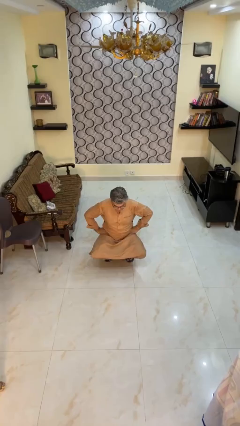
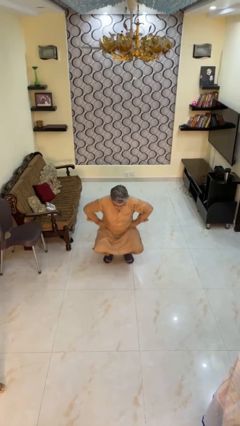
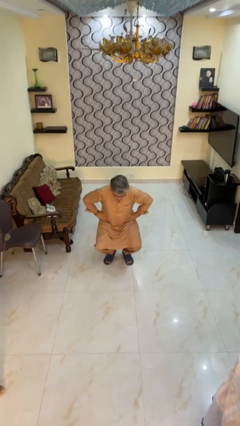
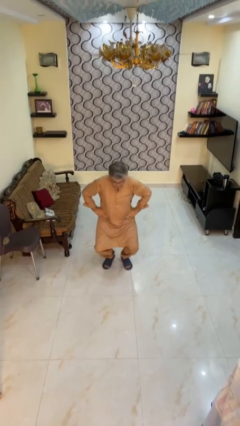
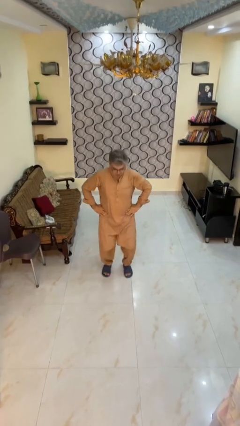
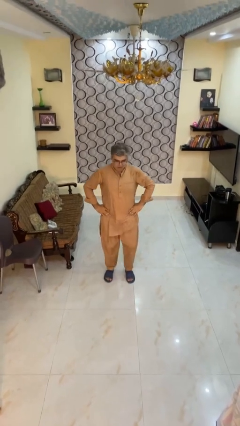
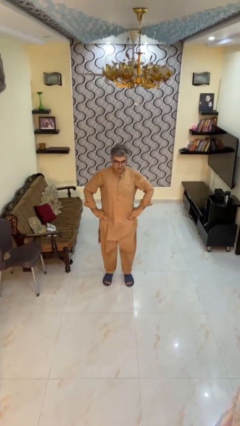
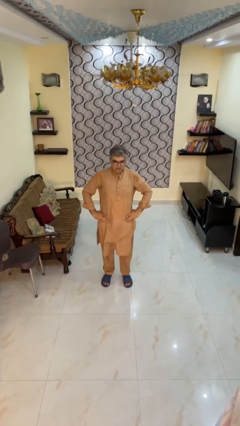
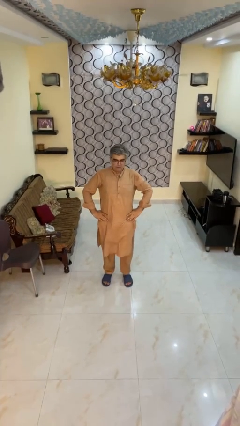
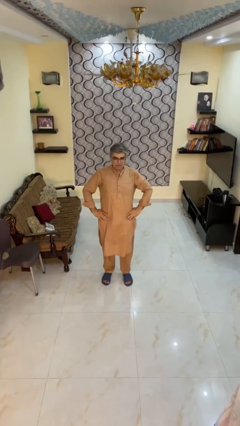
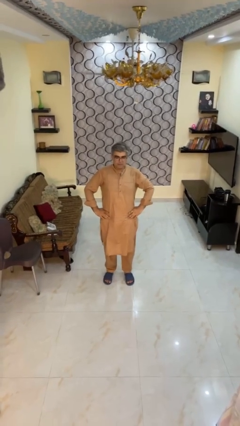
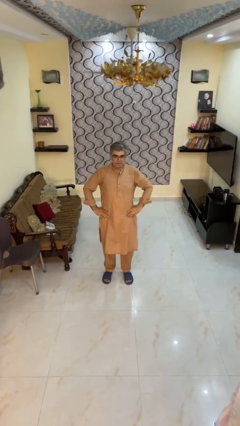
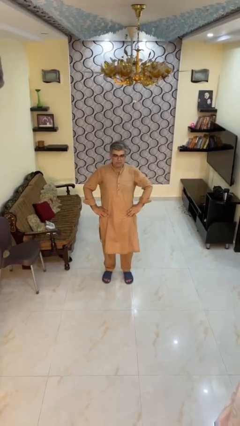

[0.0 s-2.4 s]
person stands up

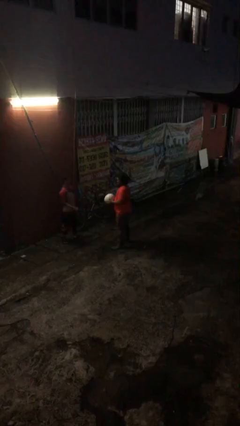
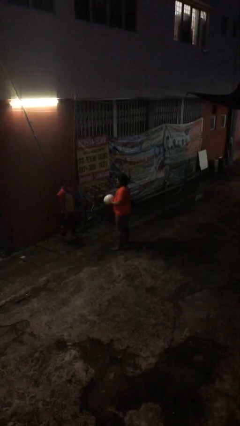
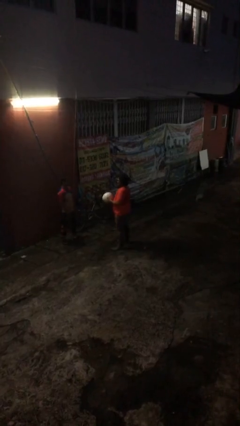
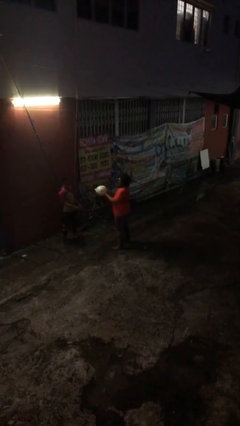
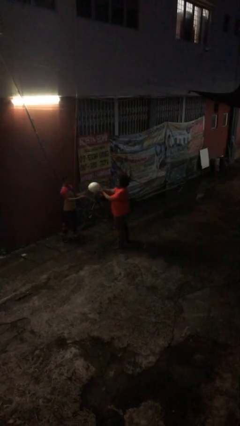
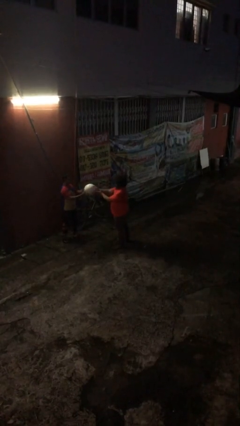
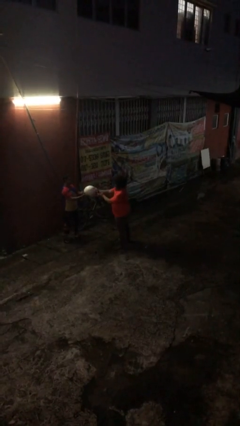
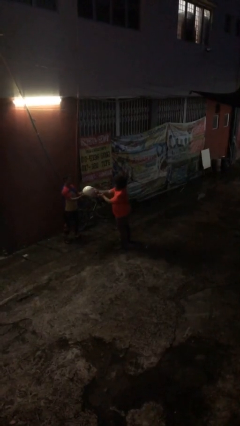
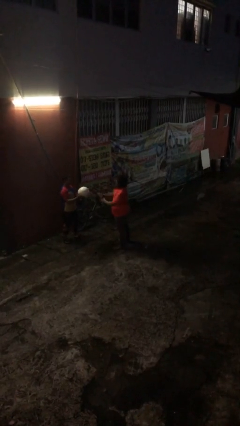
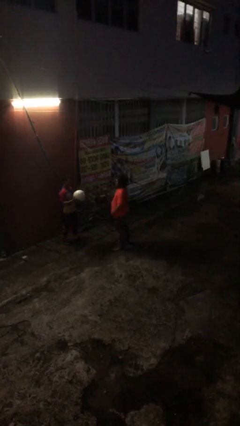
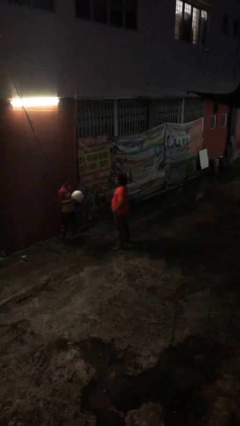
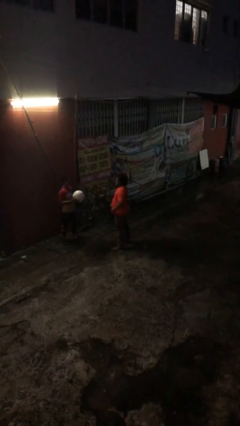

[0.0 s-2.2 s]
person transfers object to person

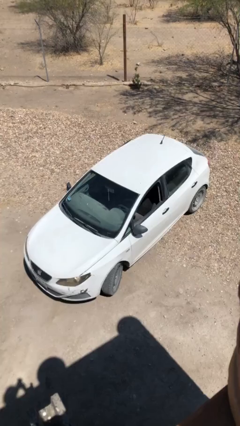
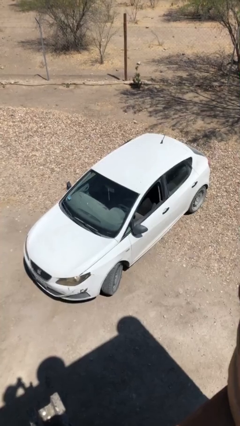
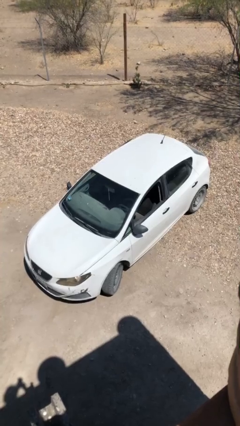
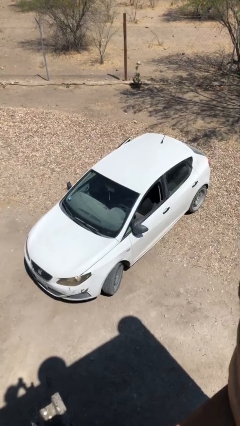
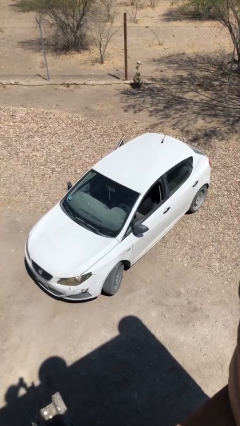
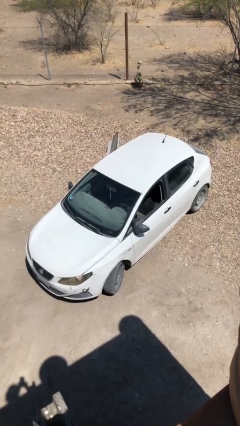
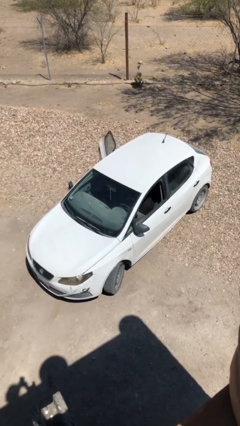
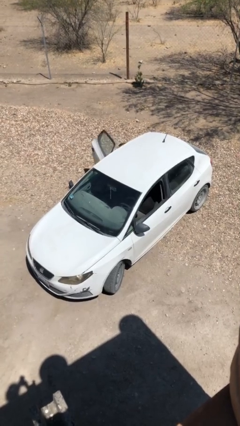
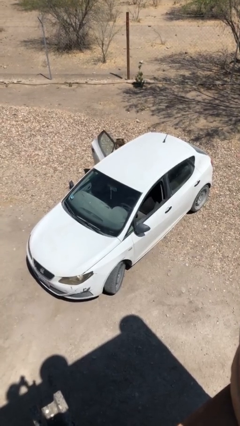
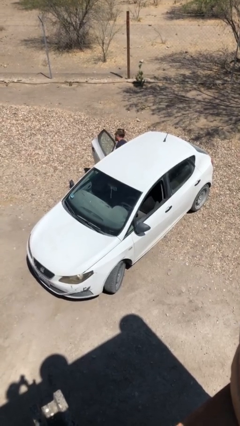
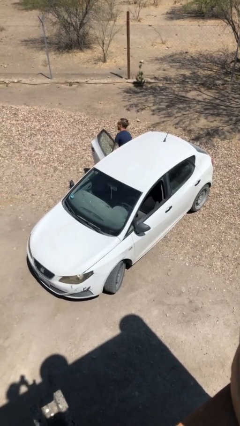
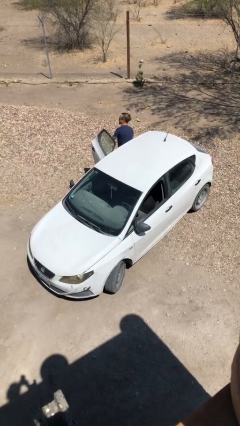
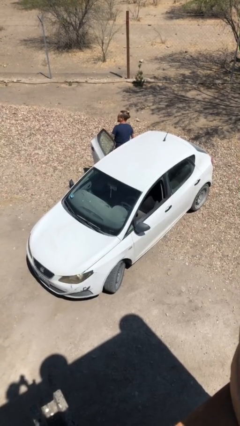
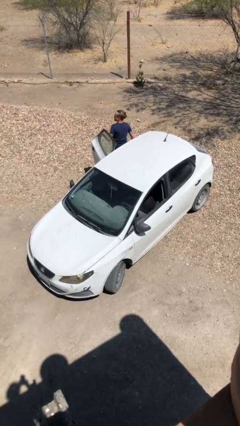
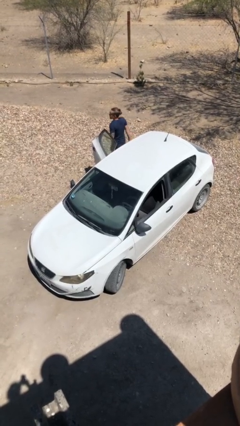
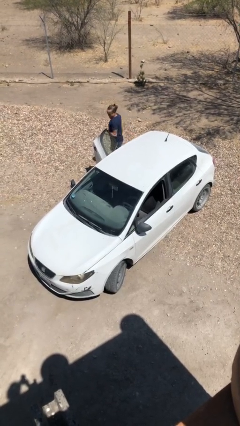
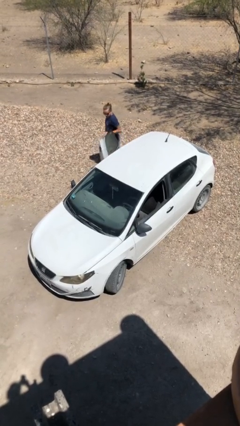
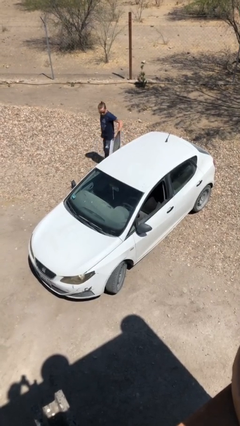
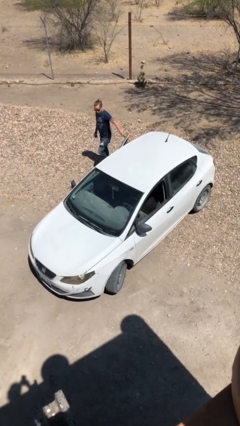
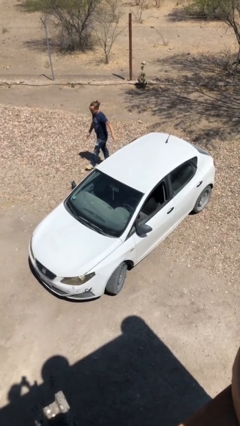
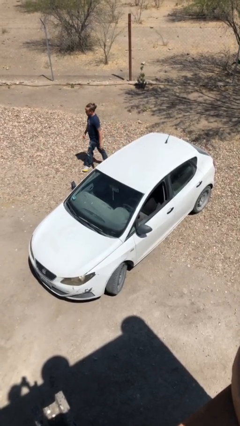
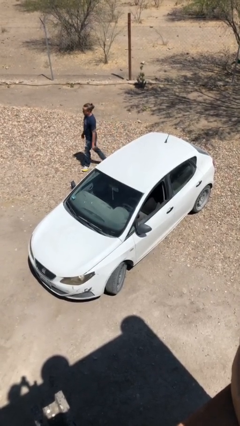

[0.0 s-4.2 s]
car drops off person

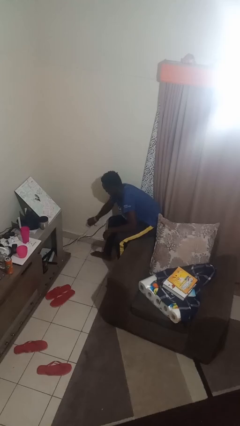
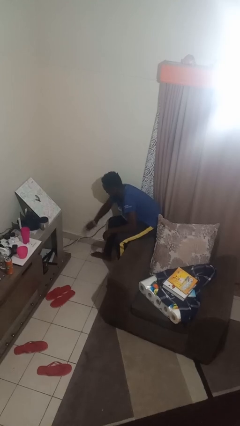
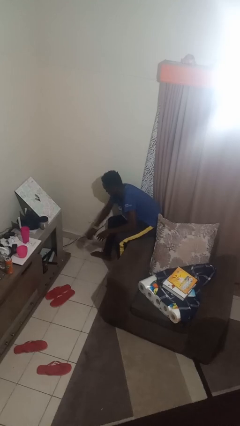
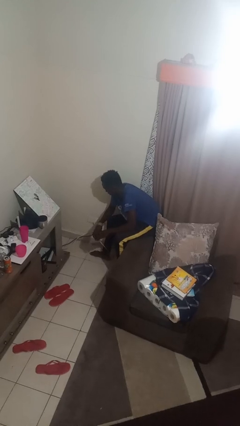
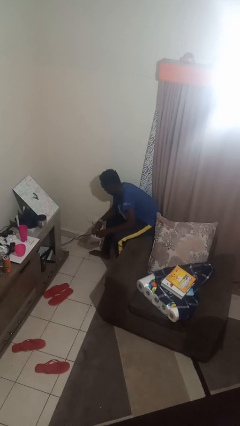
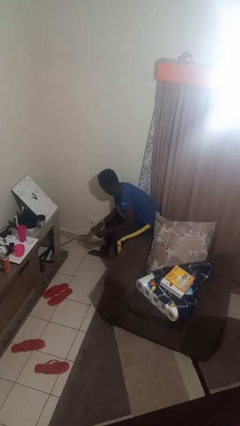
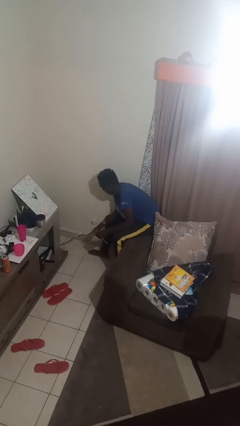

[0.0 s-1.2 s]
person unplugs from electrical socket

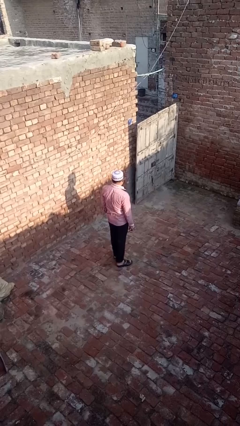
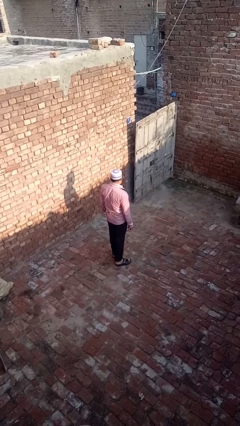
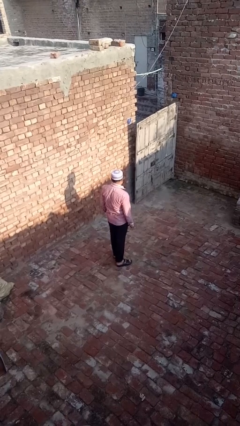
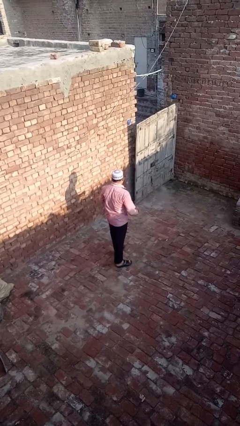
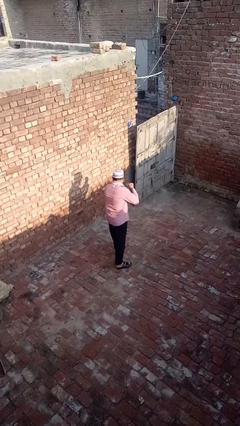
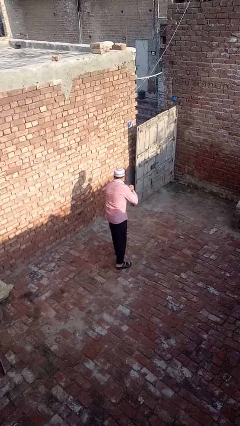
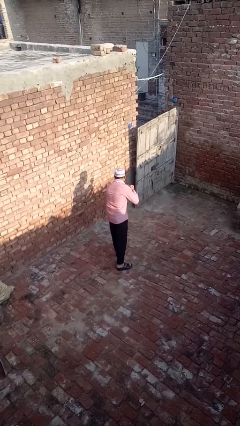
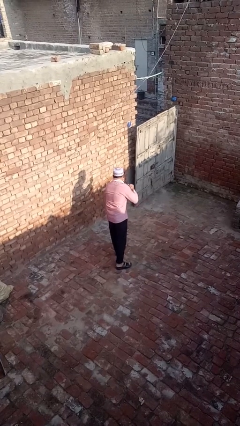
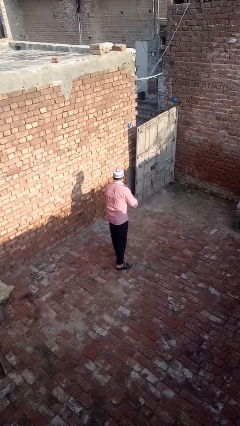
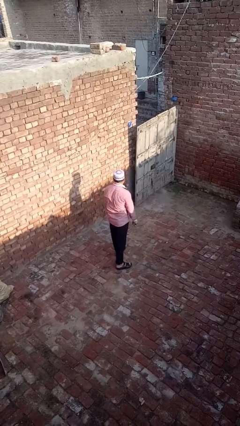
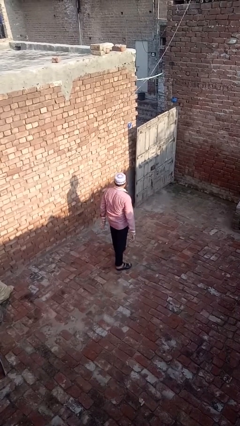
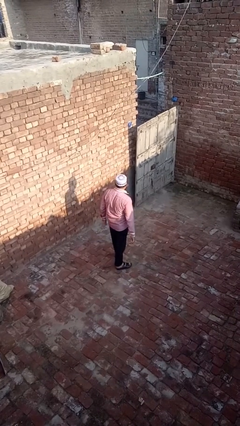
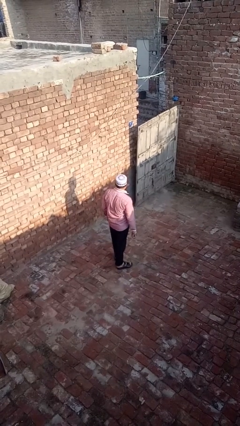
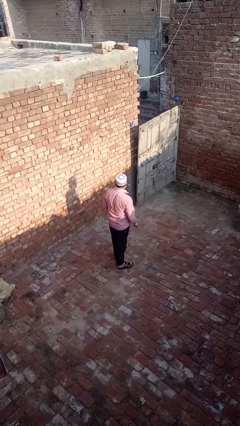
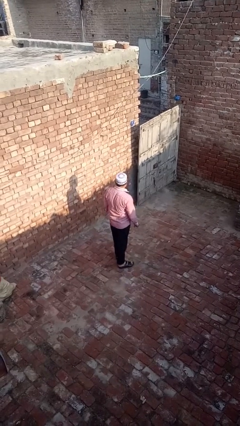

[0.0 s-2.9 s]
person karate chop

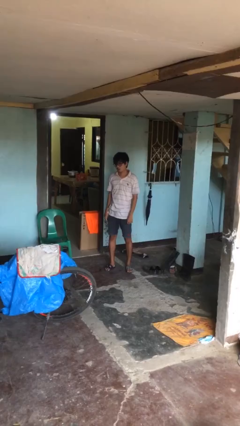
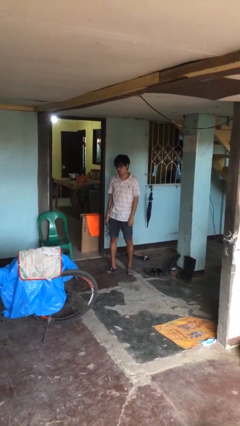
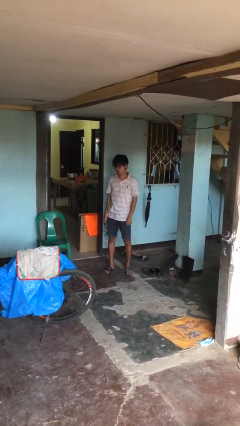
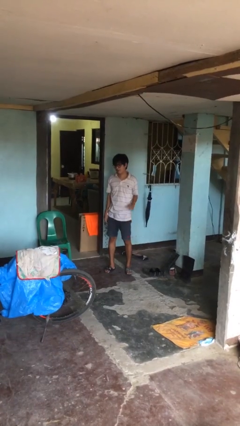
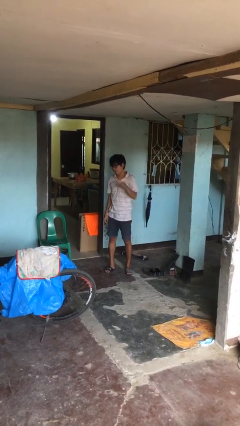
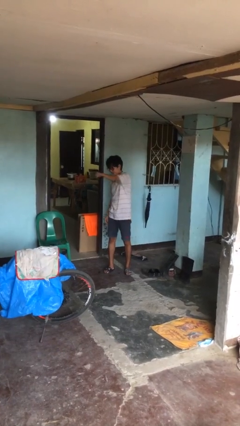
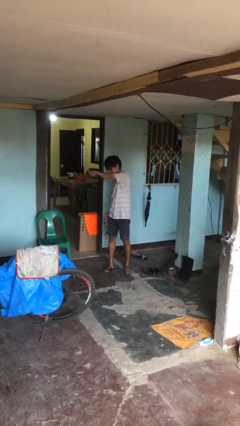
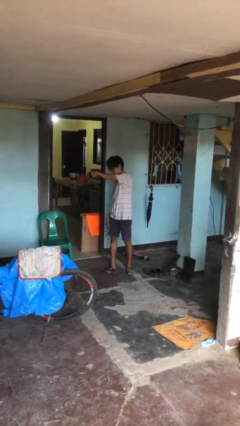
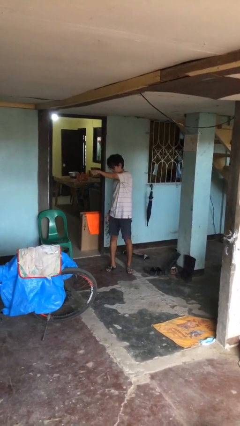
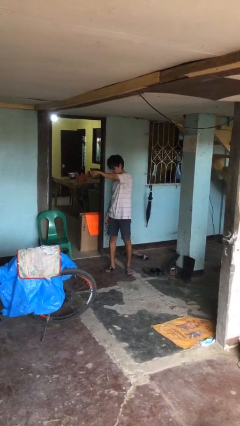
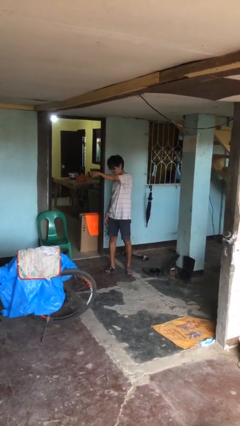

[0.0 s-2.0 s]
person punches

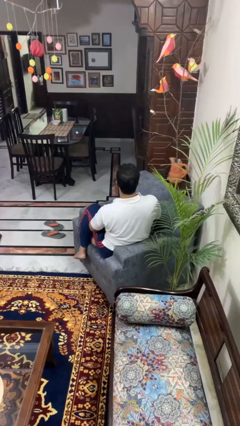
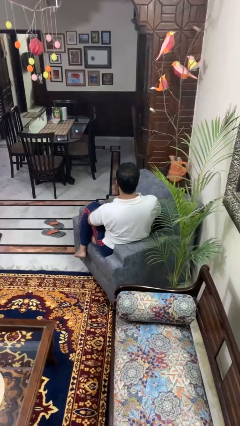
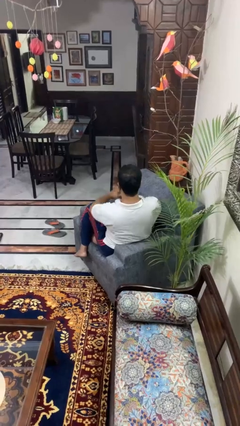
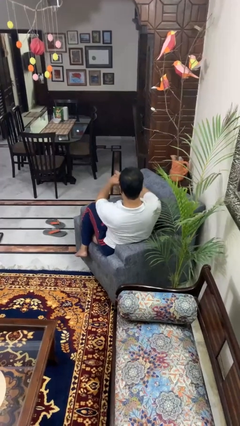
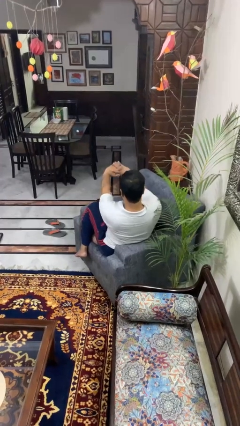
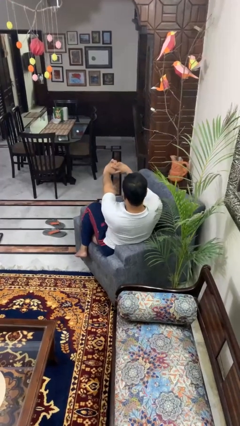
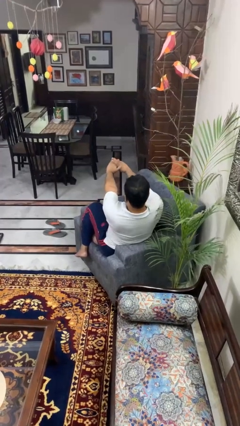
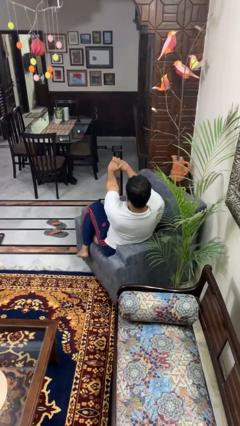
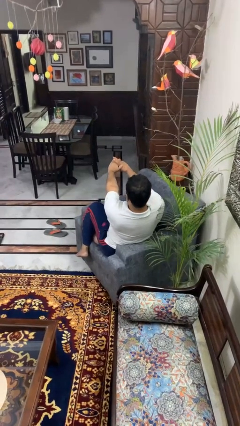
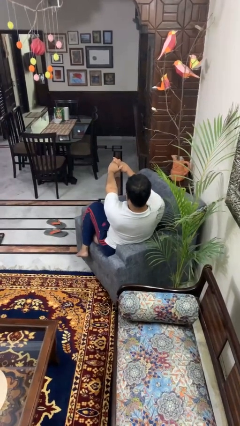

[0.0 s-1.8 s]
person cracks knuckles

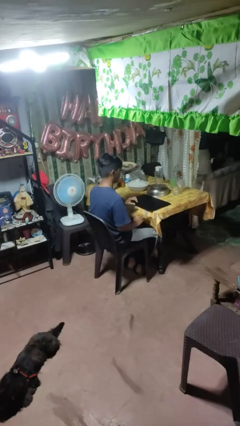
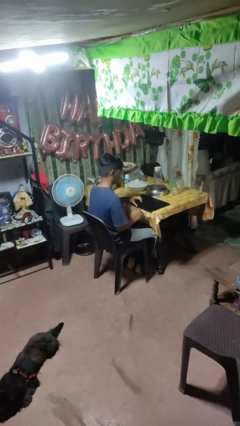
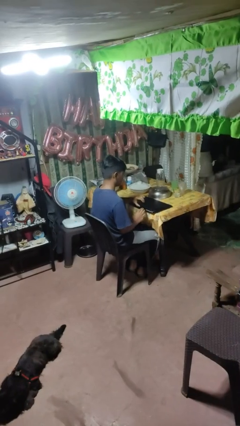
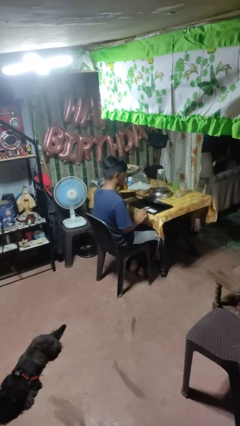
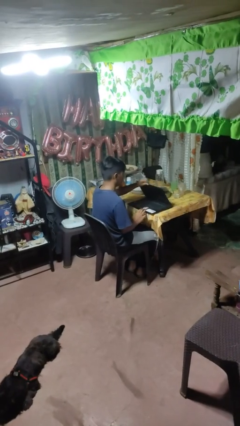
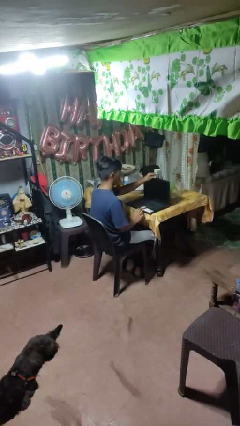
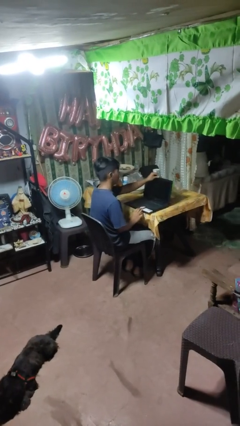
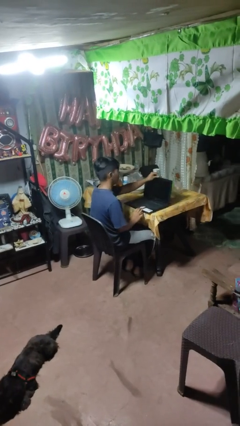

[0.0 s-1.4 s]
person opens laptop
